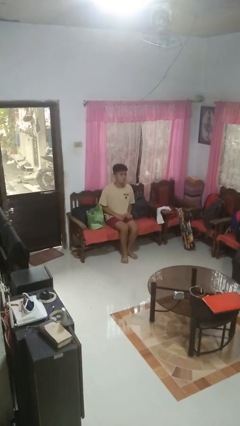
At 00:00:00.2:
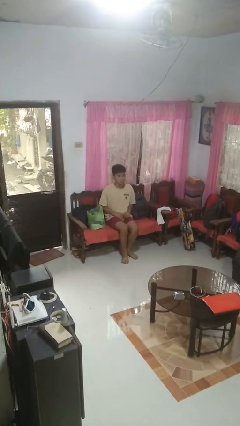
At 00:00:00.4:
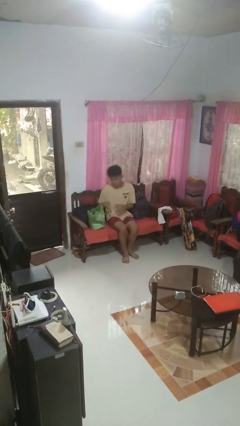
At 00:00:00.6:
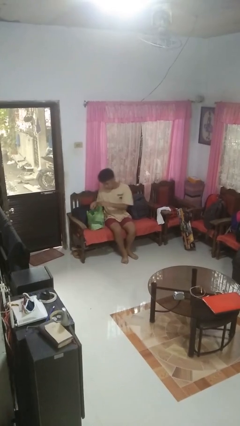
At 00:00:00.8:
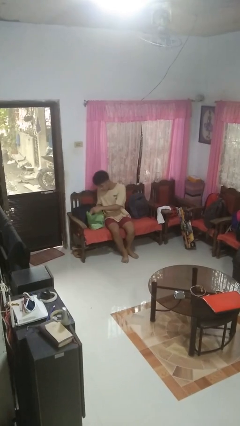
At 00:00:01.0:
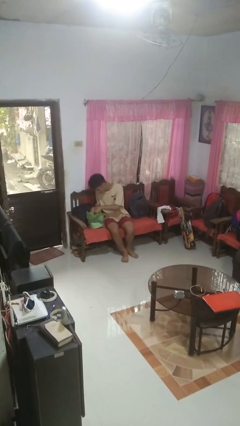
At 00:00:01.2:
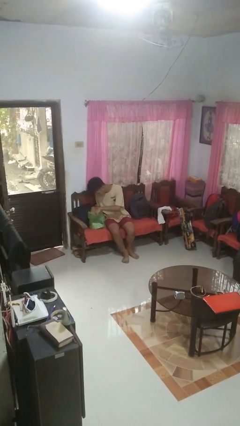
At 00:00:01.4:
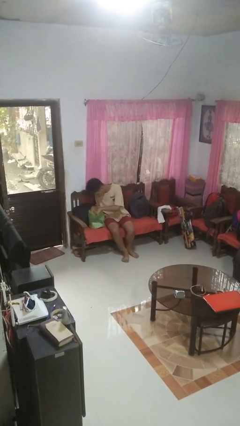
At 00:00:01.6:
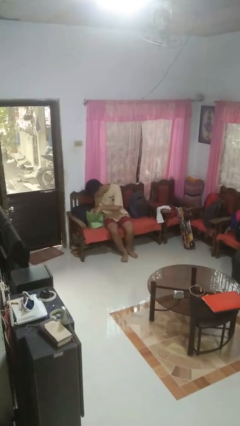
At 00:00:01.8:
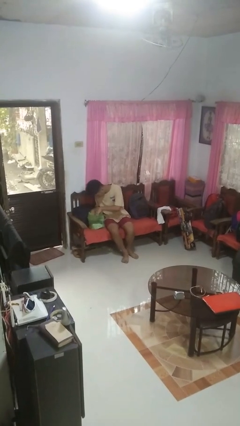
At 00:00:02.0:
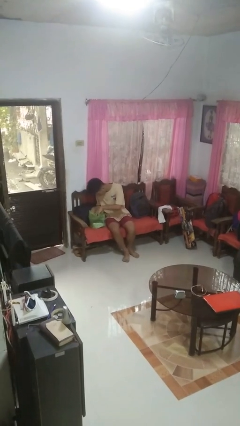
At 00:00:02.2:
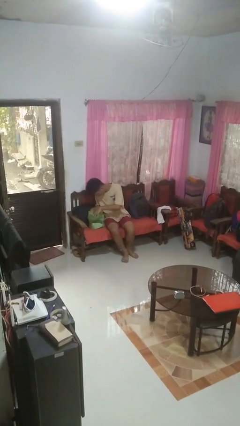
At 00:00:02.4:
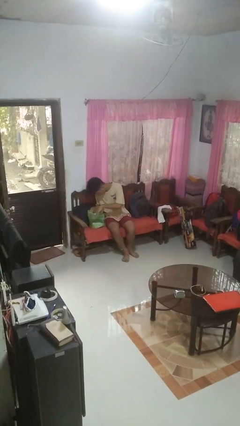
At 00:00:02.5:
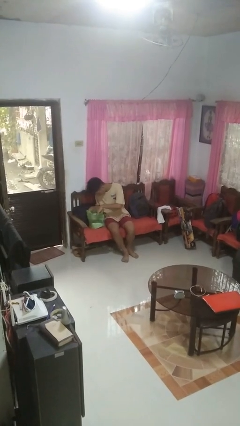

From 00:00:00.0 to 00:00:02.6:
person searches in bag

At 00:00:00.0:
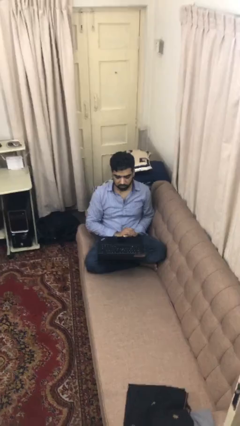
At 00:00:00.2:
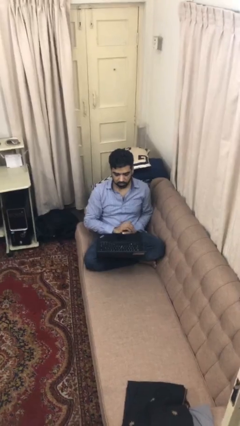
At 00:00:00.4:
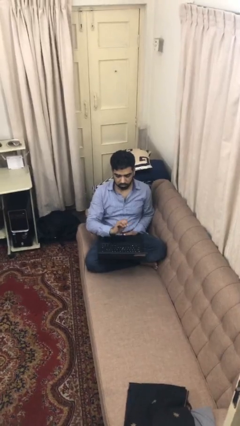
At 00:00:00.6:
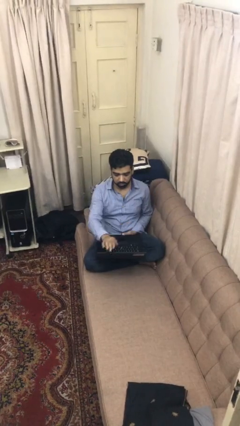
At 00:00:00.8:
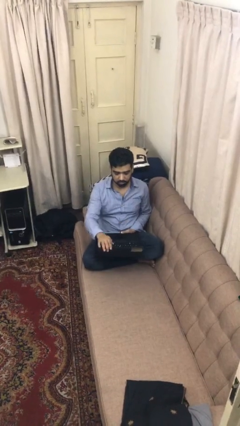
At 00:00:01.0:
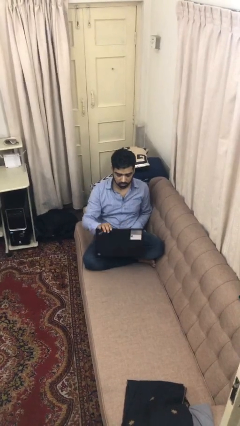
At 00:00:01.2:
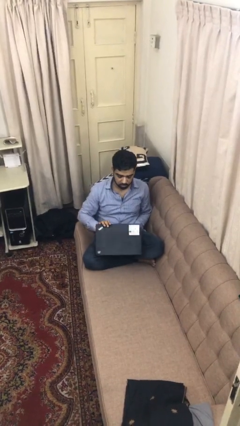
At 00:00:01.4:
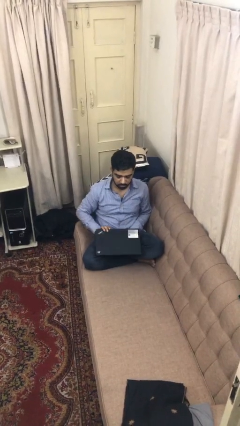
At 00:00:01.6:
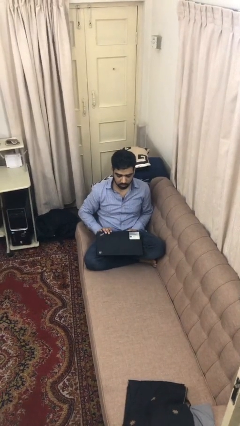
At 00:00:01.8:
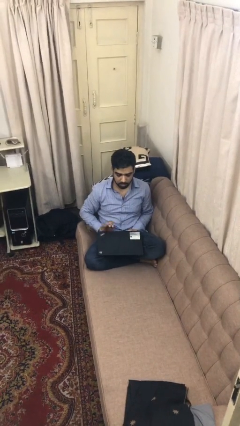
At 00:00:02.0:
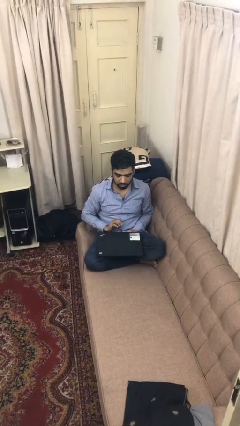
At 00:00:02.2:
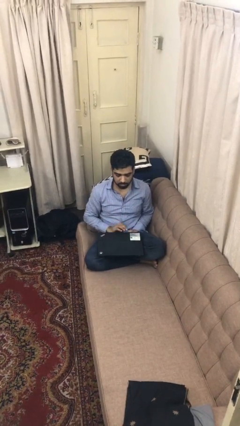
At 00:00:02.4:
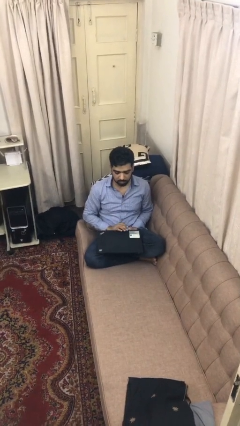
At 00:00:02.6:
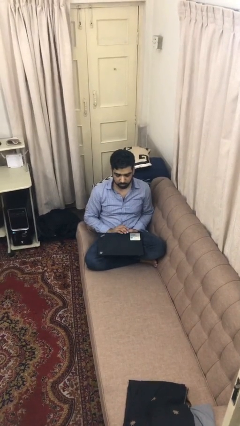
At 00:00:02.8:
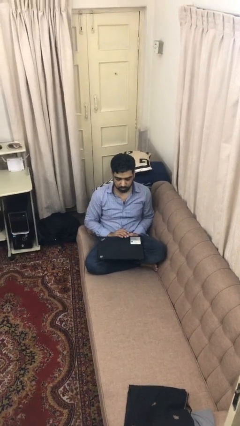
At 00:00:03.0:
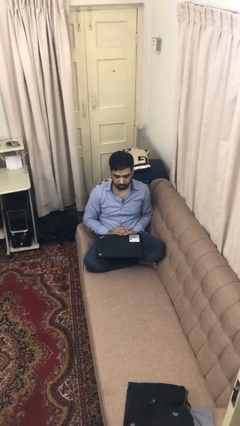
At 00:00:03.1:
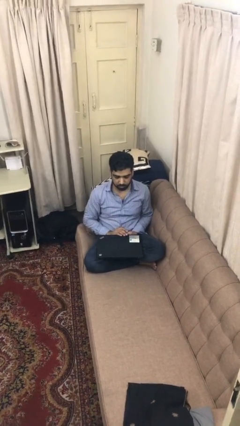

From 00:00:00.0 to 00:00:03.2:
person closes laptop

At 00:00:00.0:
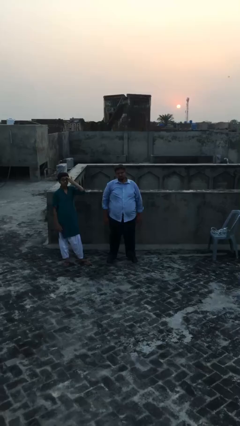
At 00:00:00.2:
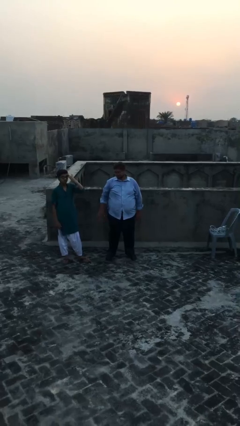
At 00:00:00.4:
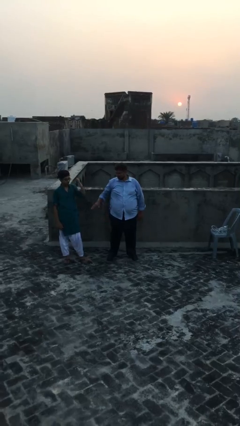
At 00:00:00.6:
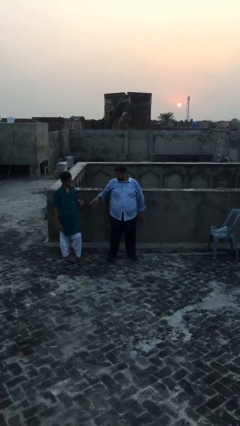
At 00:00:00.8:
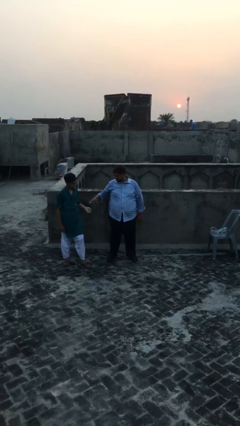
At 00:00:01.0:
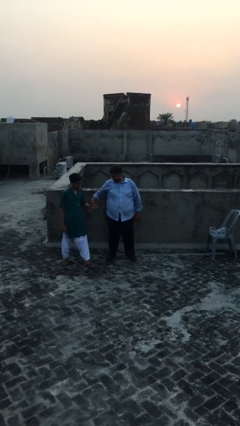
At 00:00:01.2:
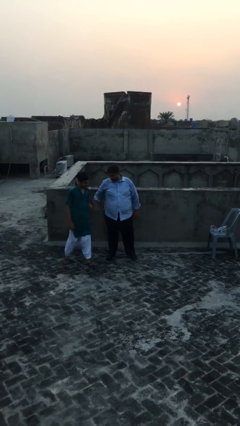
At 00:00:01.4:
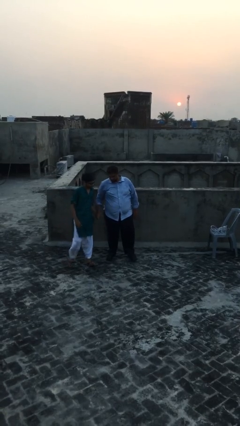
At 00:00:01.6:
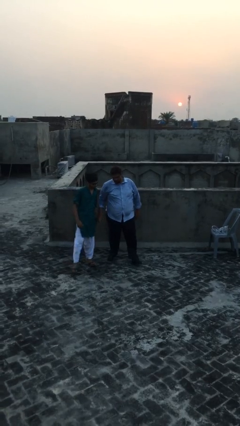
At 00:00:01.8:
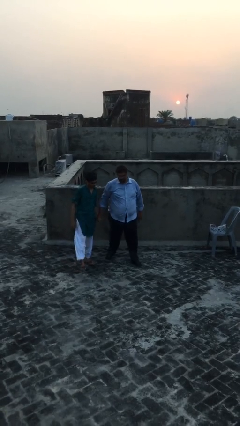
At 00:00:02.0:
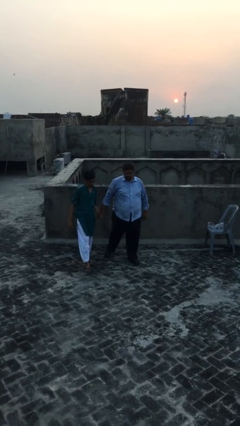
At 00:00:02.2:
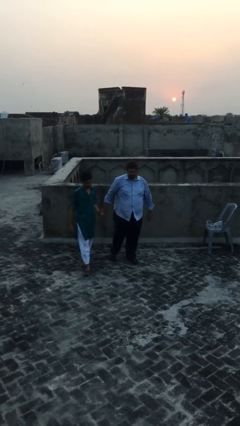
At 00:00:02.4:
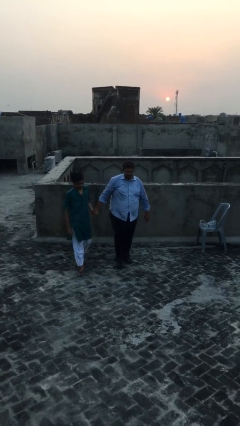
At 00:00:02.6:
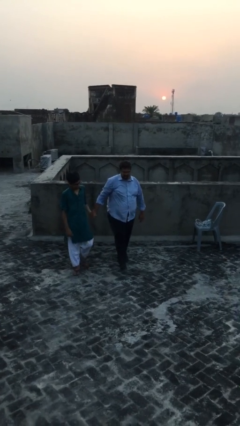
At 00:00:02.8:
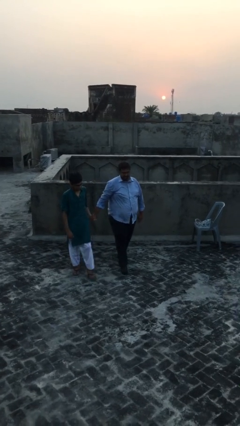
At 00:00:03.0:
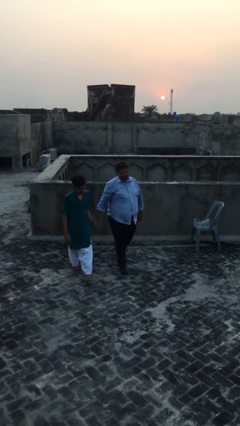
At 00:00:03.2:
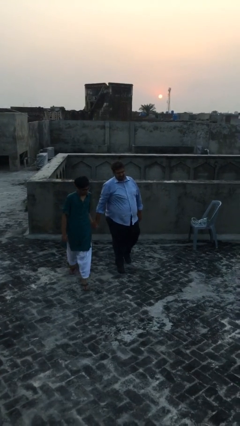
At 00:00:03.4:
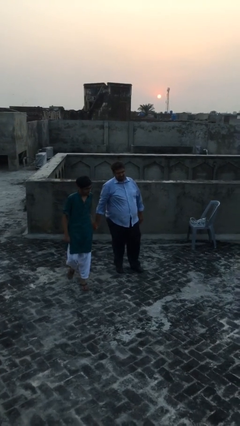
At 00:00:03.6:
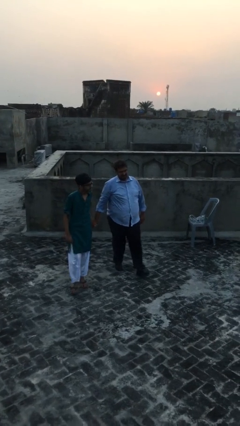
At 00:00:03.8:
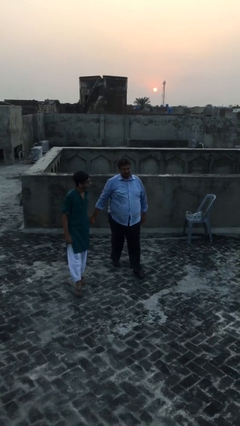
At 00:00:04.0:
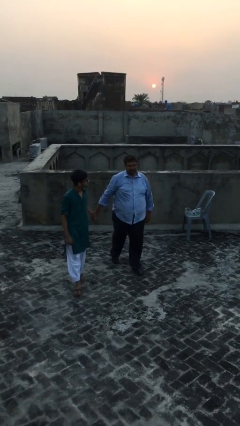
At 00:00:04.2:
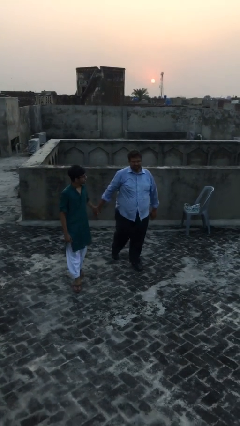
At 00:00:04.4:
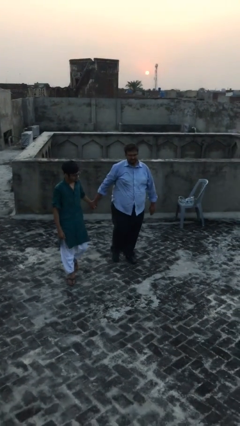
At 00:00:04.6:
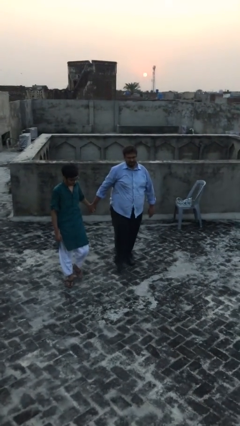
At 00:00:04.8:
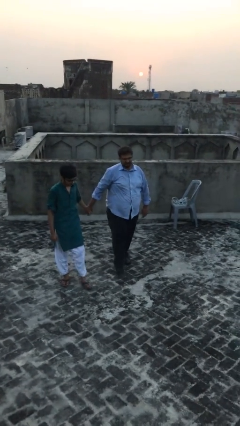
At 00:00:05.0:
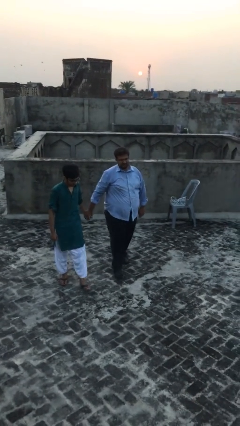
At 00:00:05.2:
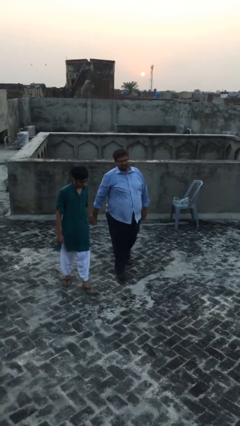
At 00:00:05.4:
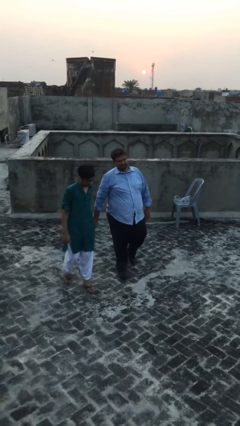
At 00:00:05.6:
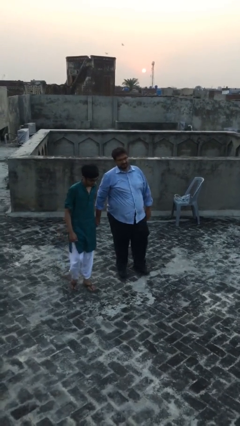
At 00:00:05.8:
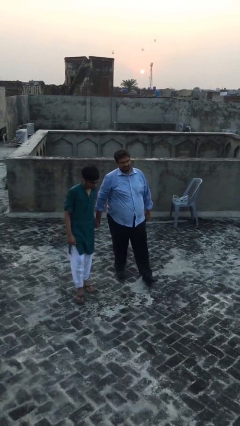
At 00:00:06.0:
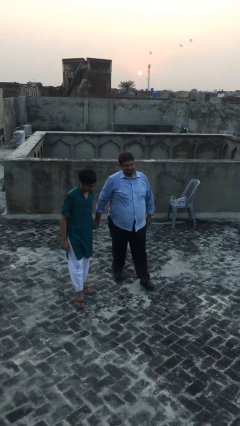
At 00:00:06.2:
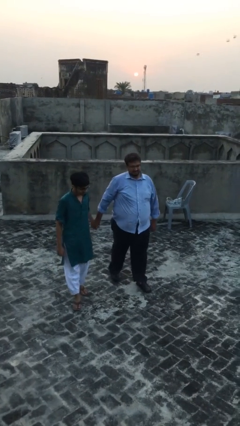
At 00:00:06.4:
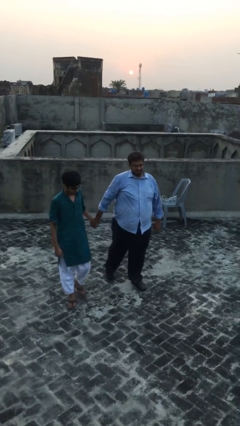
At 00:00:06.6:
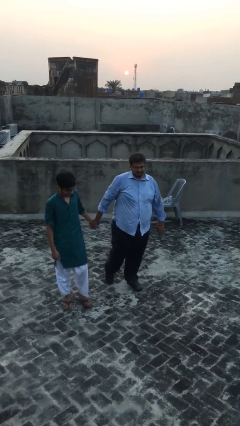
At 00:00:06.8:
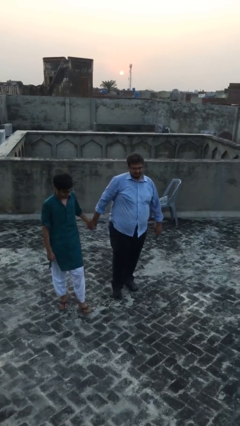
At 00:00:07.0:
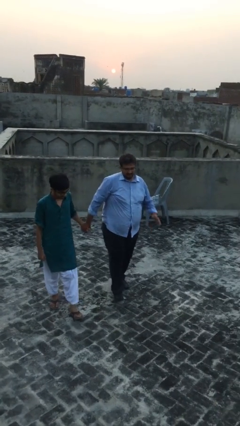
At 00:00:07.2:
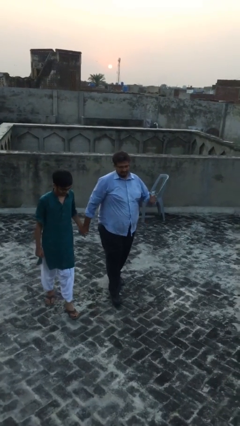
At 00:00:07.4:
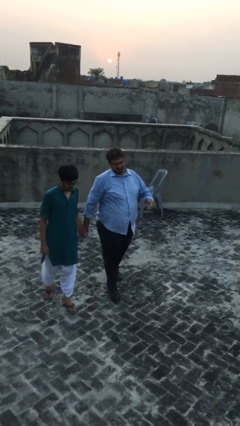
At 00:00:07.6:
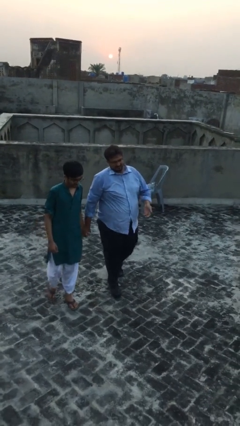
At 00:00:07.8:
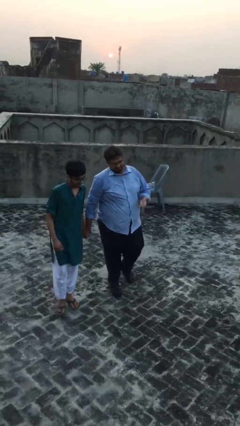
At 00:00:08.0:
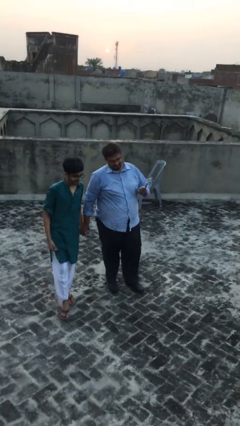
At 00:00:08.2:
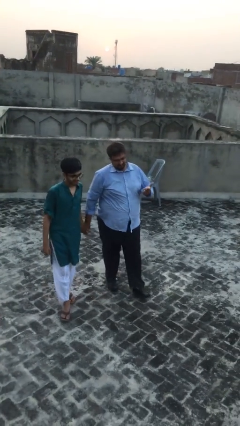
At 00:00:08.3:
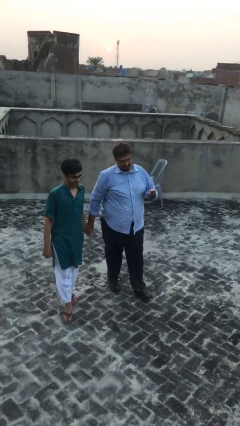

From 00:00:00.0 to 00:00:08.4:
person holds hand

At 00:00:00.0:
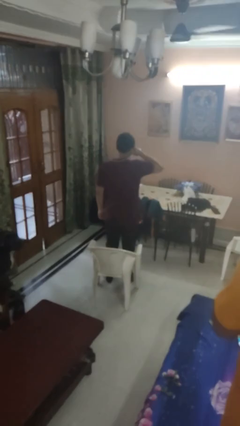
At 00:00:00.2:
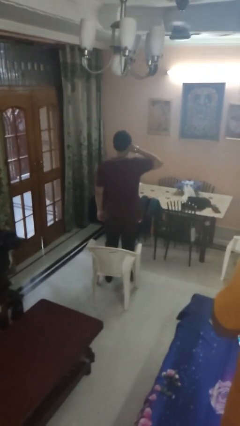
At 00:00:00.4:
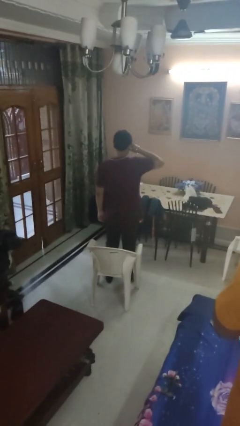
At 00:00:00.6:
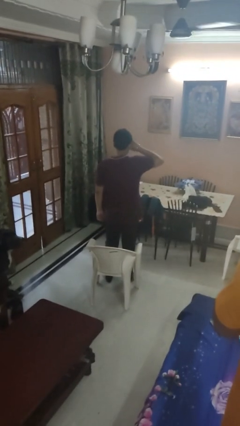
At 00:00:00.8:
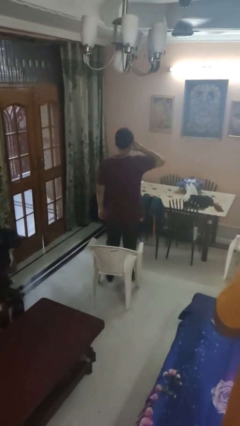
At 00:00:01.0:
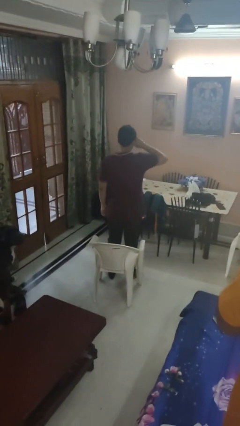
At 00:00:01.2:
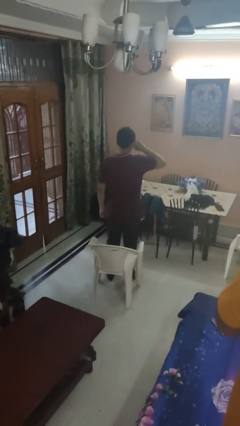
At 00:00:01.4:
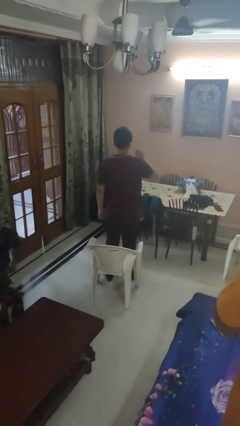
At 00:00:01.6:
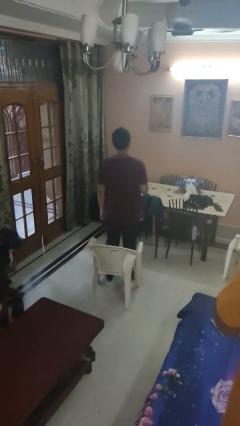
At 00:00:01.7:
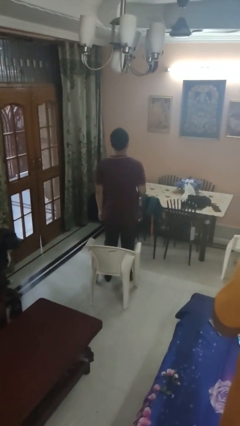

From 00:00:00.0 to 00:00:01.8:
person rubs eyes

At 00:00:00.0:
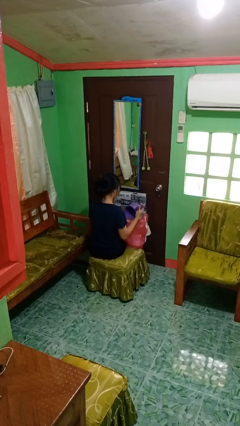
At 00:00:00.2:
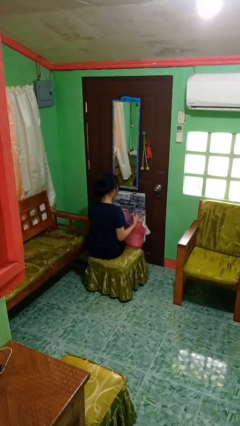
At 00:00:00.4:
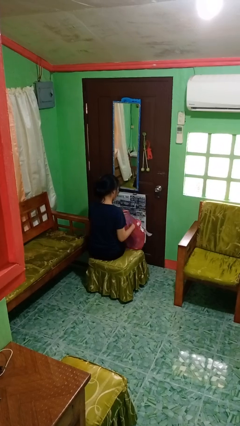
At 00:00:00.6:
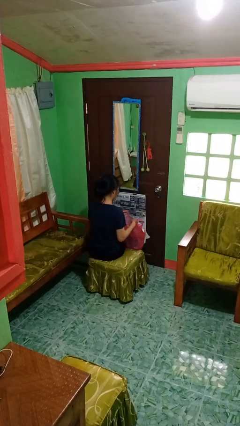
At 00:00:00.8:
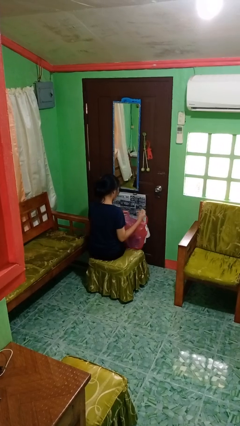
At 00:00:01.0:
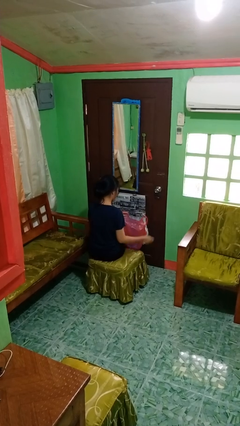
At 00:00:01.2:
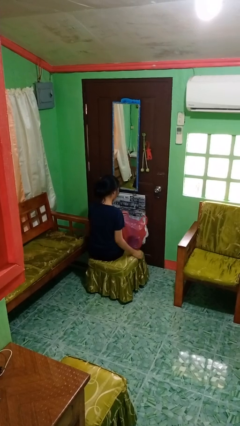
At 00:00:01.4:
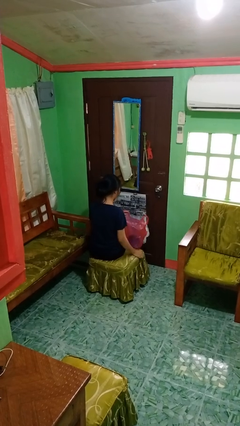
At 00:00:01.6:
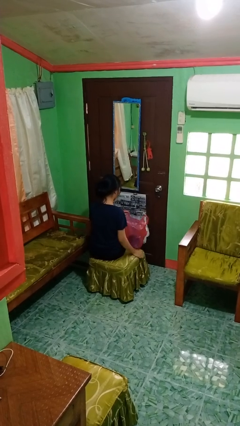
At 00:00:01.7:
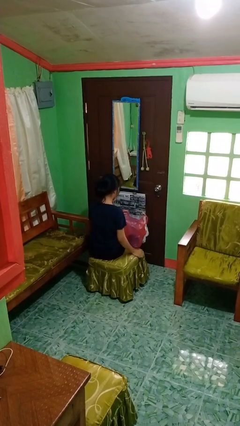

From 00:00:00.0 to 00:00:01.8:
person puts object into bag
